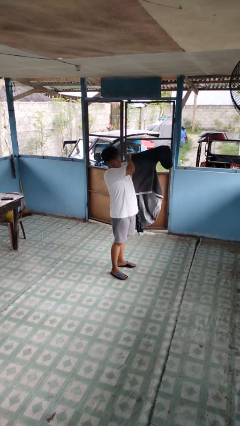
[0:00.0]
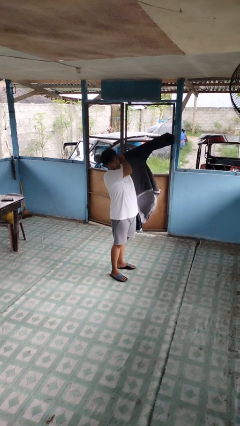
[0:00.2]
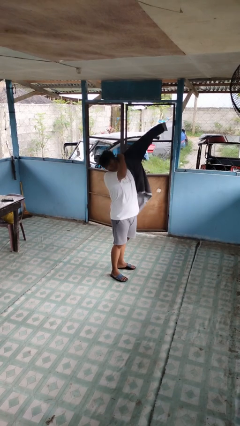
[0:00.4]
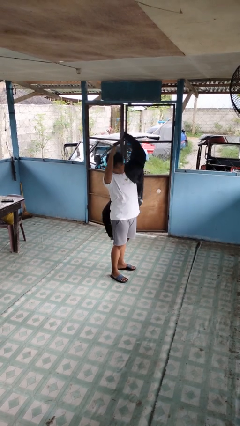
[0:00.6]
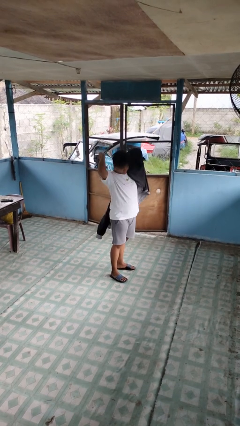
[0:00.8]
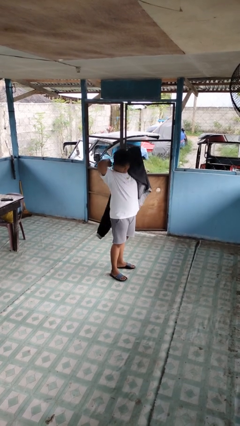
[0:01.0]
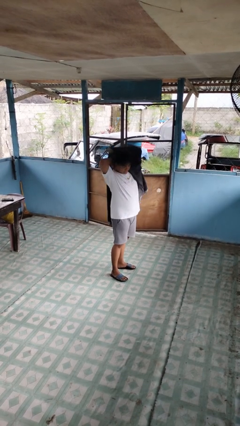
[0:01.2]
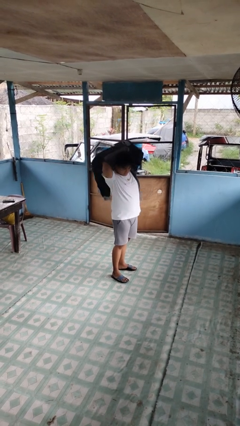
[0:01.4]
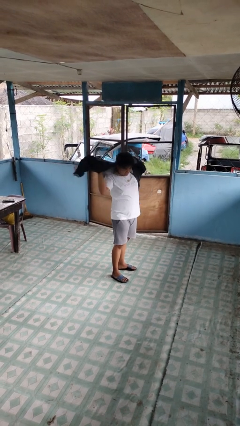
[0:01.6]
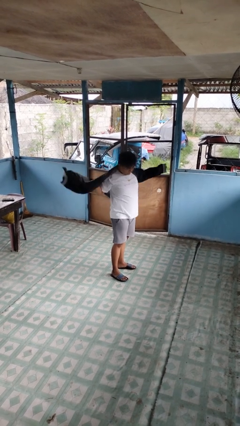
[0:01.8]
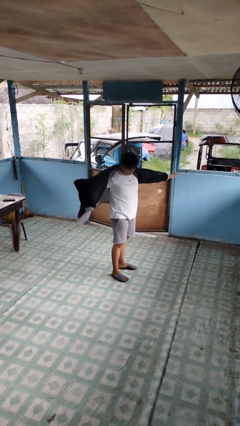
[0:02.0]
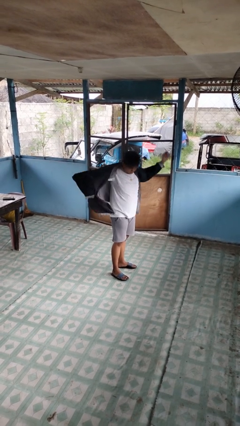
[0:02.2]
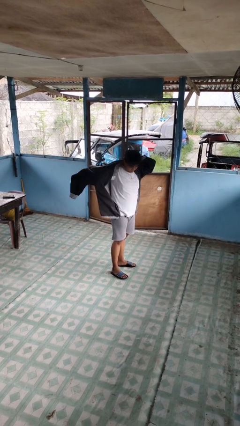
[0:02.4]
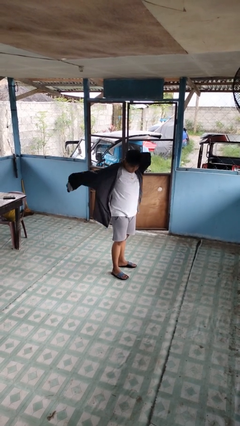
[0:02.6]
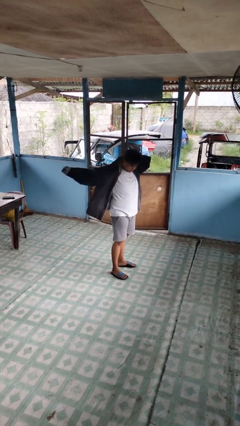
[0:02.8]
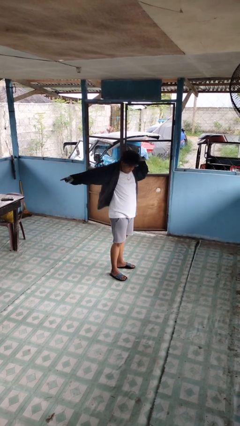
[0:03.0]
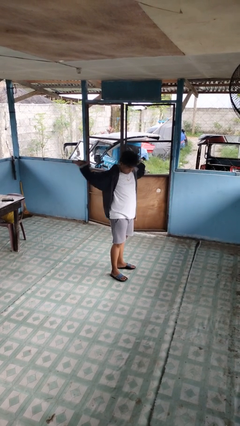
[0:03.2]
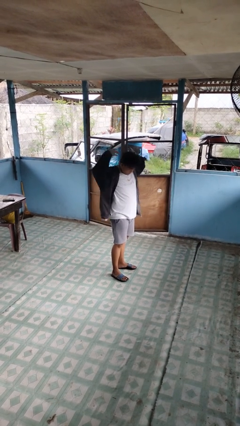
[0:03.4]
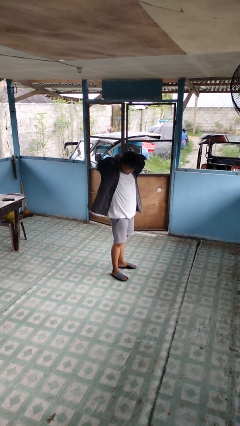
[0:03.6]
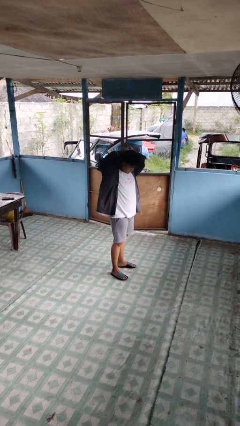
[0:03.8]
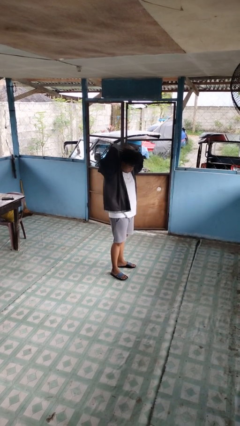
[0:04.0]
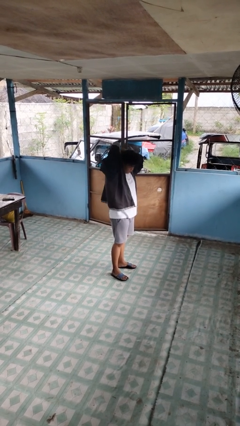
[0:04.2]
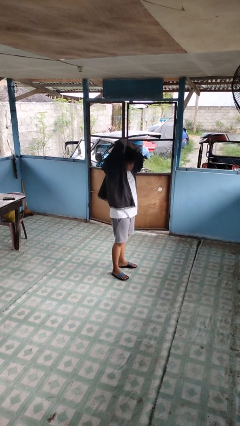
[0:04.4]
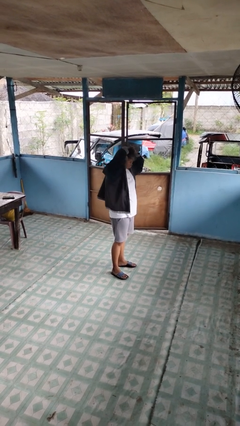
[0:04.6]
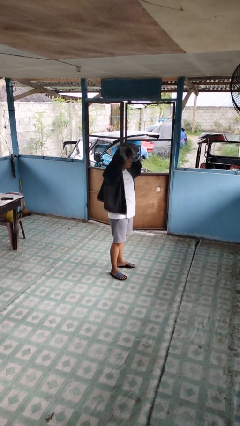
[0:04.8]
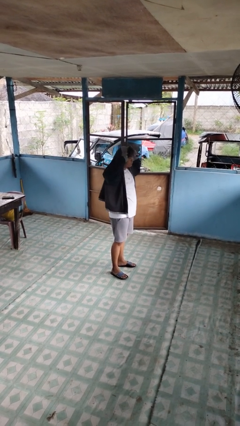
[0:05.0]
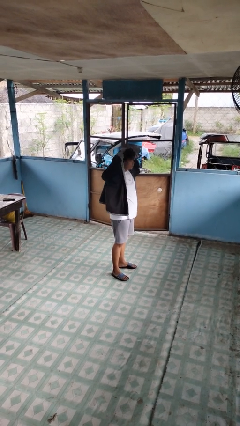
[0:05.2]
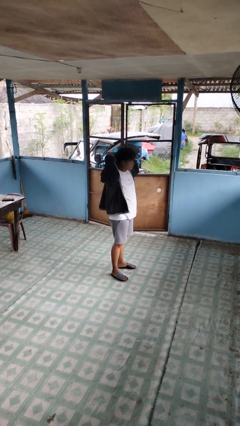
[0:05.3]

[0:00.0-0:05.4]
person puts on hoodie

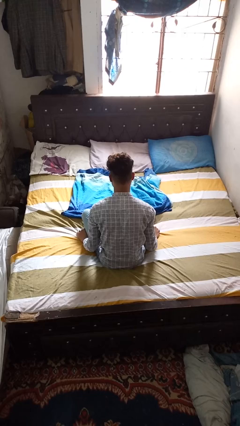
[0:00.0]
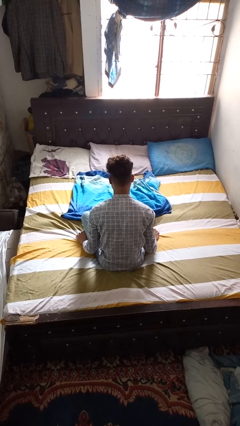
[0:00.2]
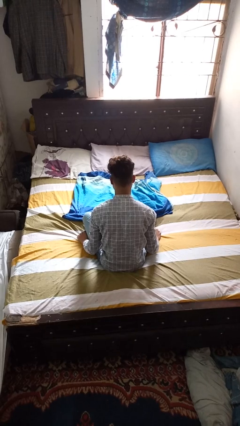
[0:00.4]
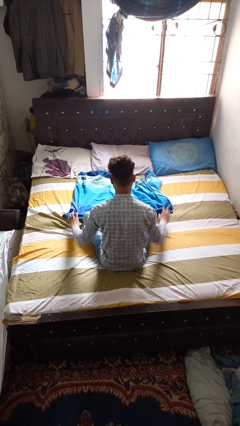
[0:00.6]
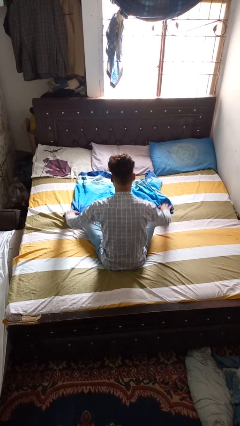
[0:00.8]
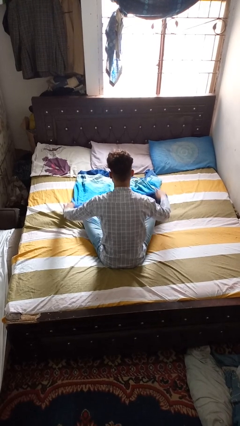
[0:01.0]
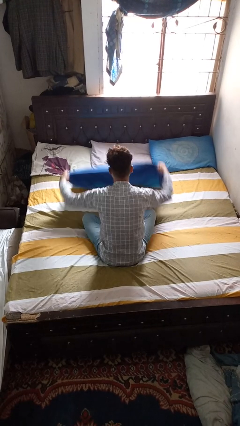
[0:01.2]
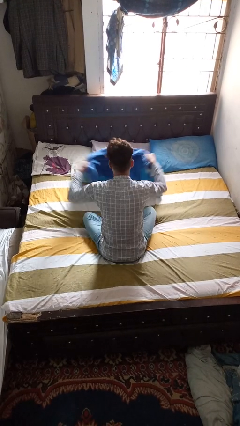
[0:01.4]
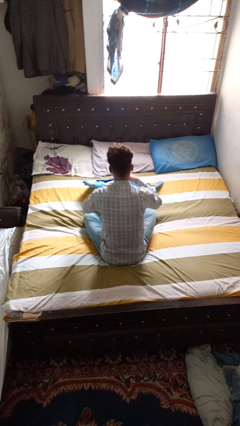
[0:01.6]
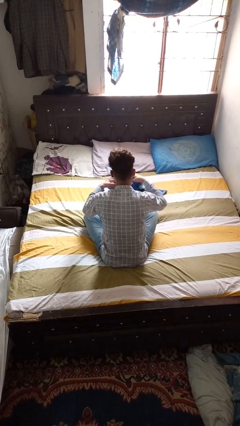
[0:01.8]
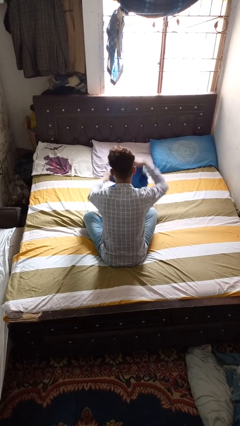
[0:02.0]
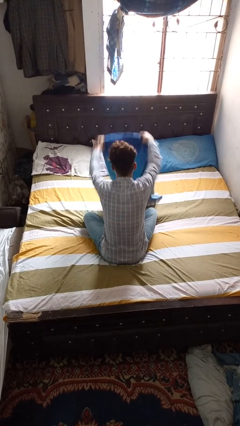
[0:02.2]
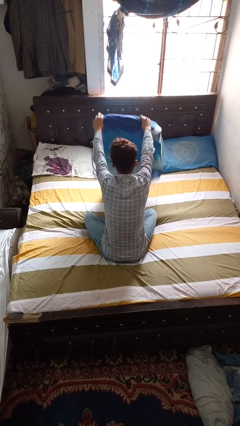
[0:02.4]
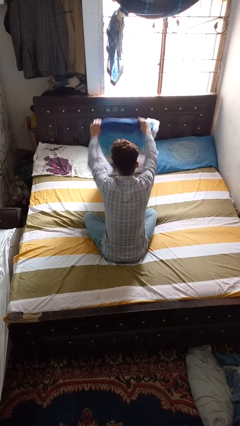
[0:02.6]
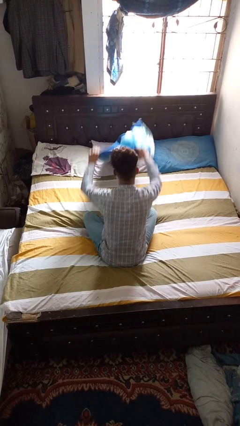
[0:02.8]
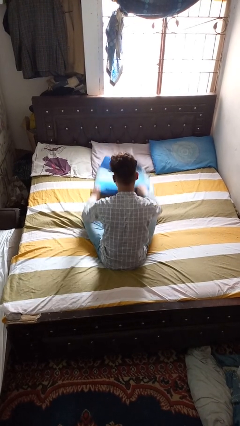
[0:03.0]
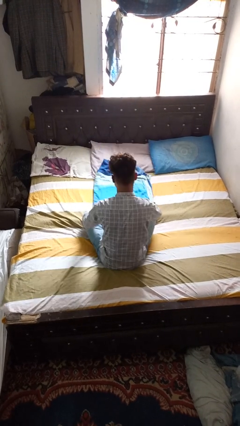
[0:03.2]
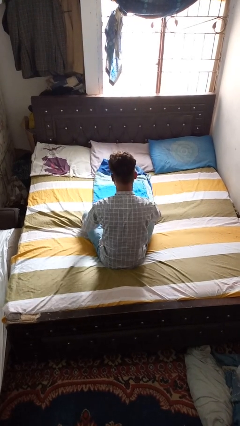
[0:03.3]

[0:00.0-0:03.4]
person folds blanket

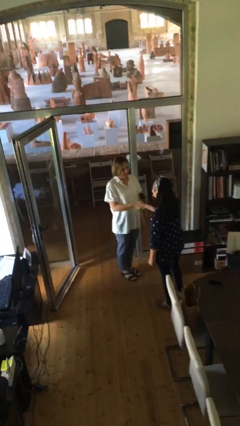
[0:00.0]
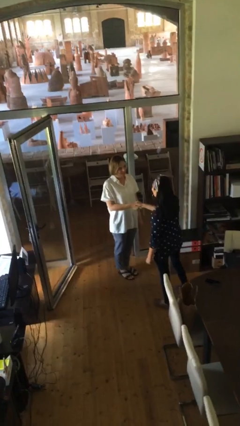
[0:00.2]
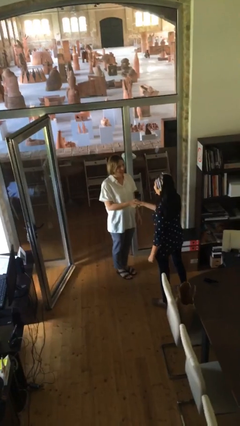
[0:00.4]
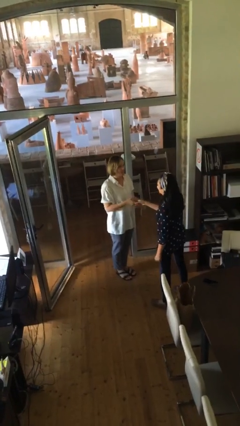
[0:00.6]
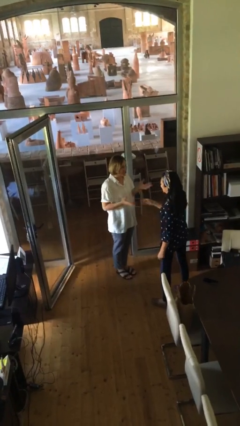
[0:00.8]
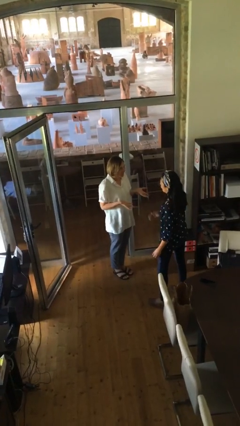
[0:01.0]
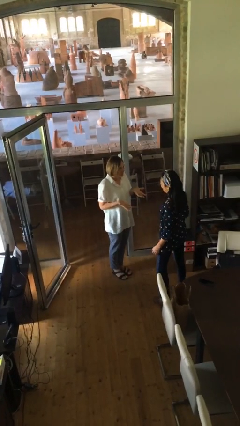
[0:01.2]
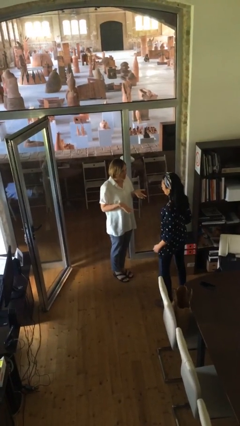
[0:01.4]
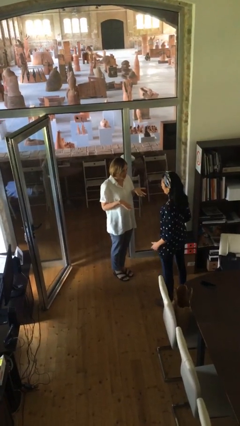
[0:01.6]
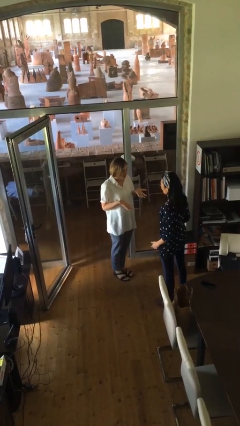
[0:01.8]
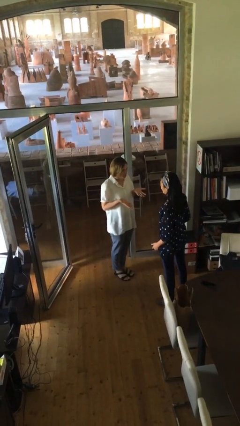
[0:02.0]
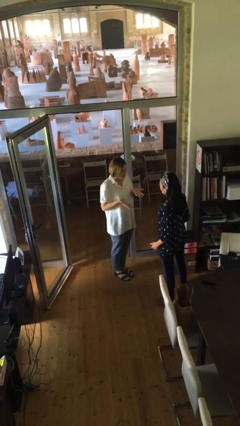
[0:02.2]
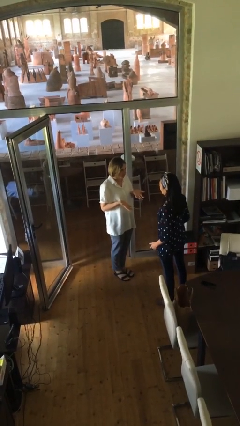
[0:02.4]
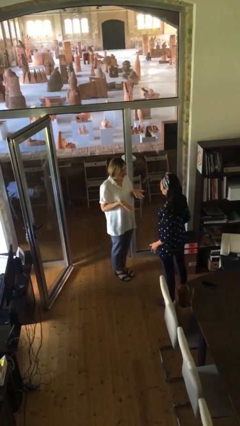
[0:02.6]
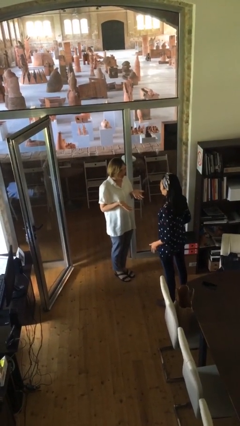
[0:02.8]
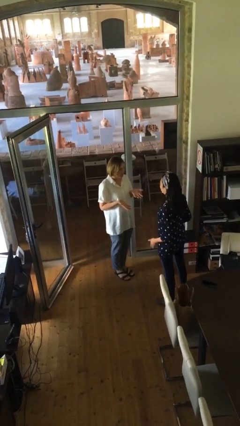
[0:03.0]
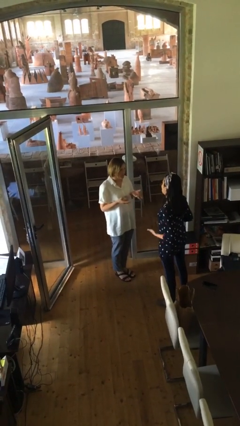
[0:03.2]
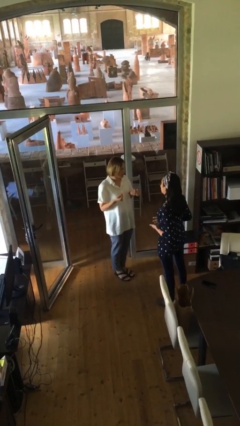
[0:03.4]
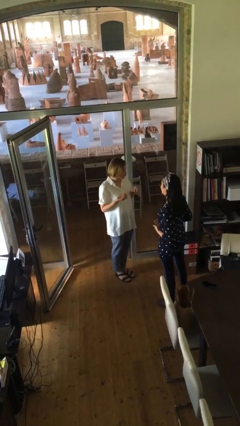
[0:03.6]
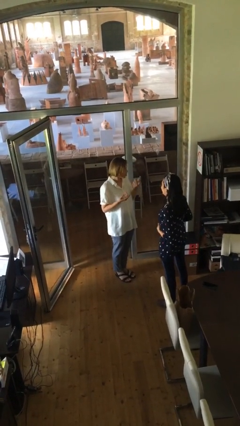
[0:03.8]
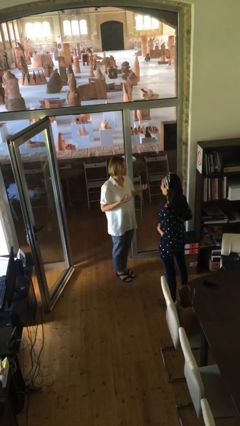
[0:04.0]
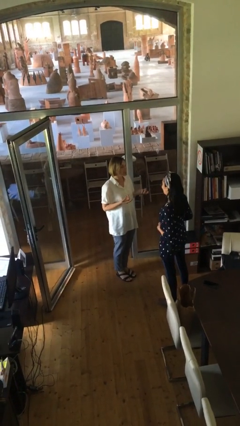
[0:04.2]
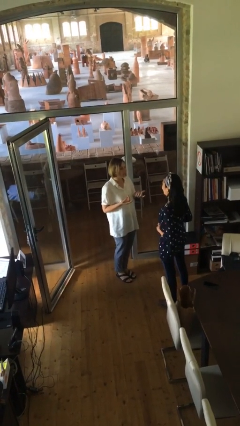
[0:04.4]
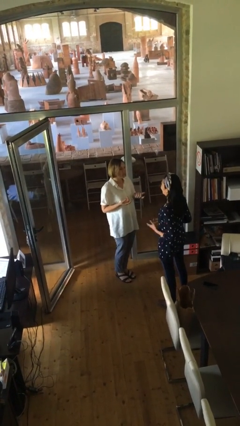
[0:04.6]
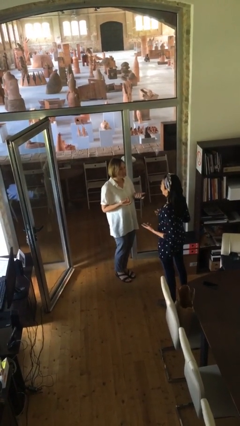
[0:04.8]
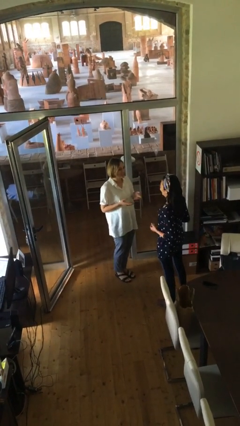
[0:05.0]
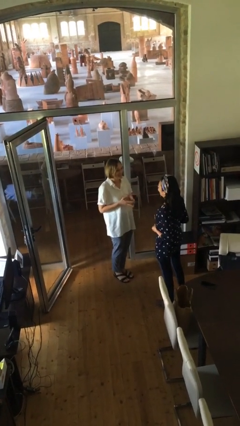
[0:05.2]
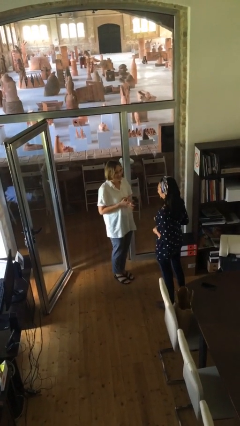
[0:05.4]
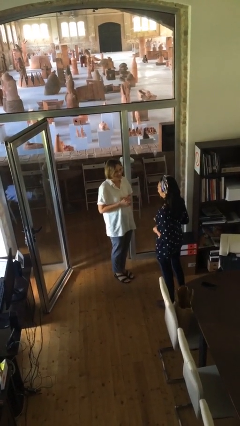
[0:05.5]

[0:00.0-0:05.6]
person talks to person

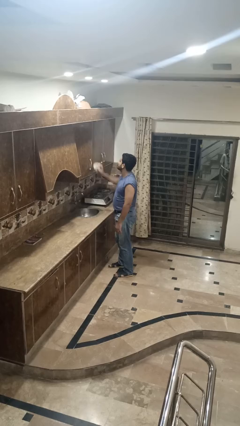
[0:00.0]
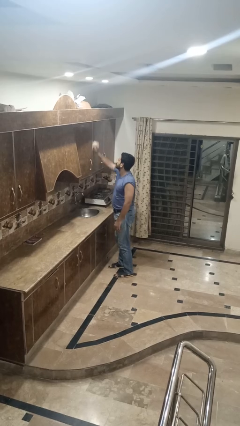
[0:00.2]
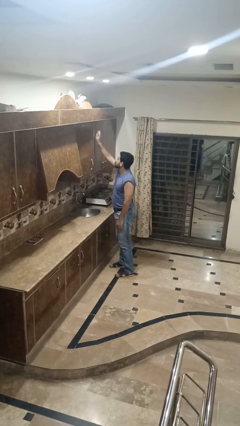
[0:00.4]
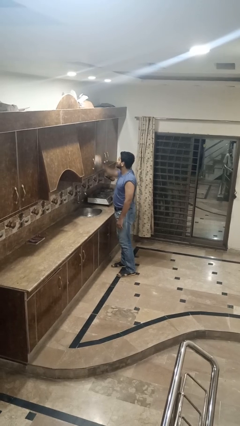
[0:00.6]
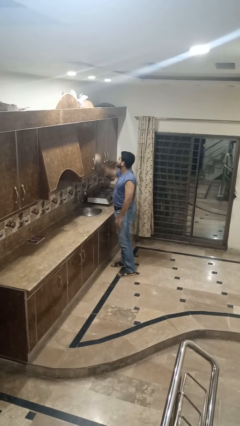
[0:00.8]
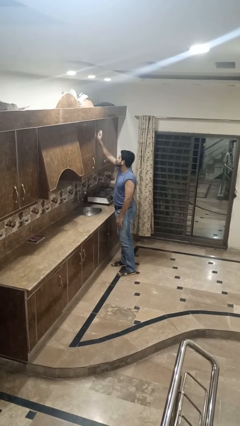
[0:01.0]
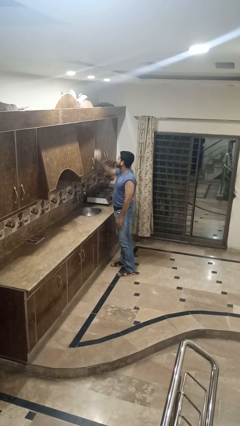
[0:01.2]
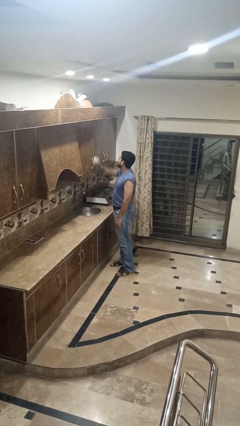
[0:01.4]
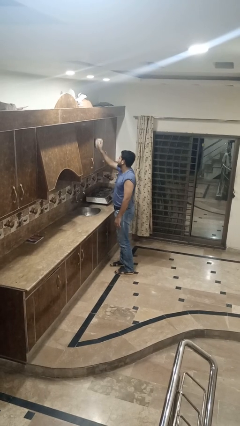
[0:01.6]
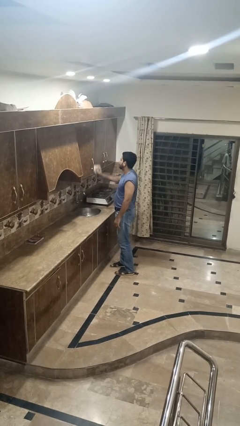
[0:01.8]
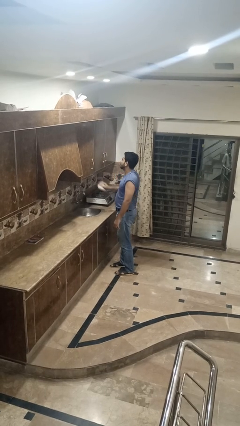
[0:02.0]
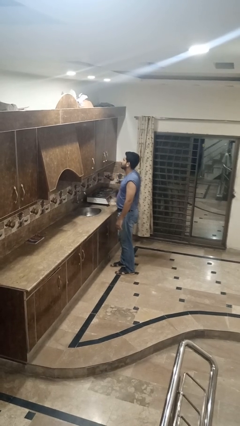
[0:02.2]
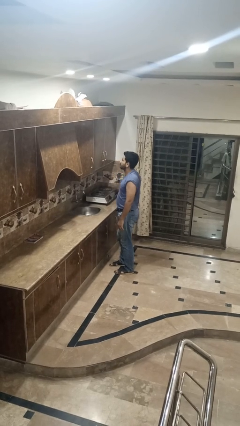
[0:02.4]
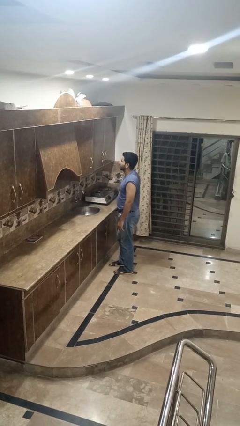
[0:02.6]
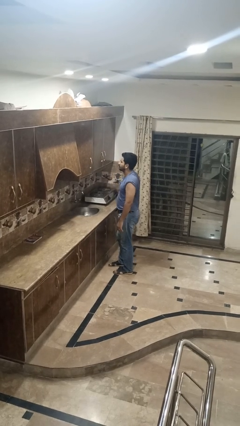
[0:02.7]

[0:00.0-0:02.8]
person dusts furniture

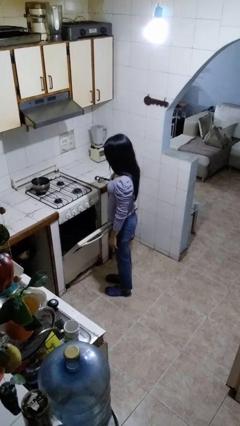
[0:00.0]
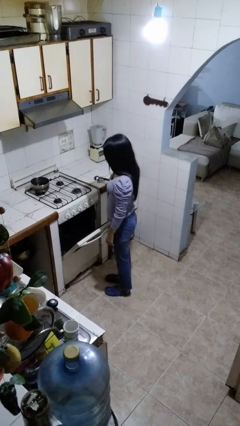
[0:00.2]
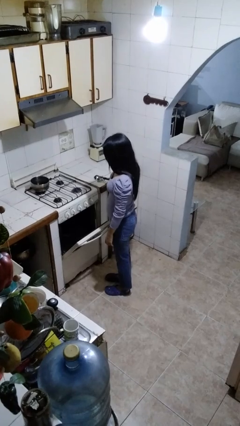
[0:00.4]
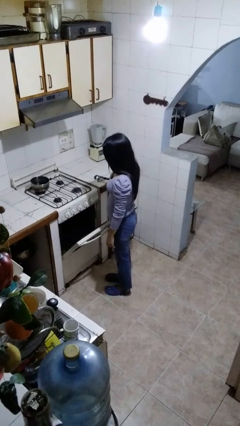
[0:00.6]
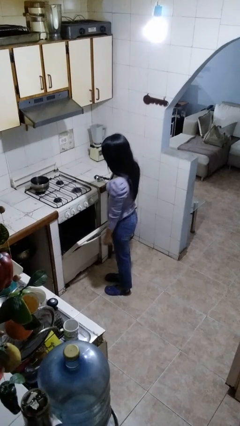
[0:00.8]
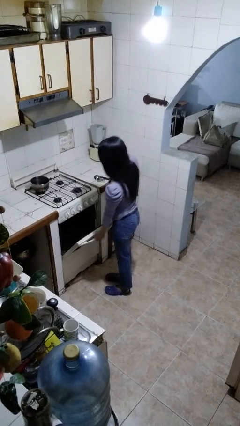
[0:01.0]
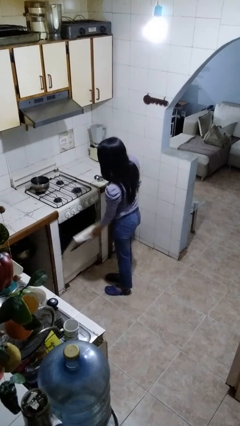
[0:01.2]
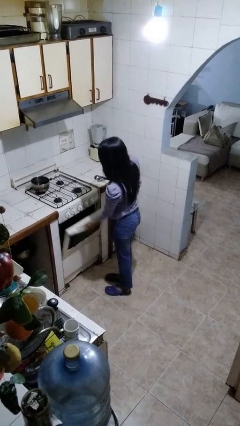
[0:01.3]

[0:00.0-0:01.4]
person closes oven door
